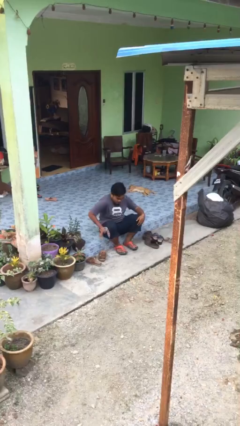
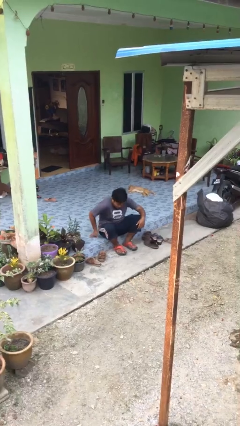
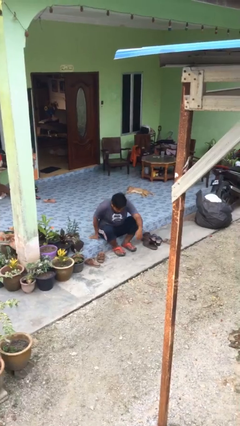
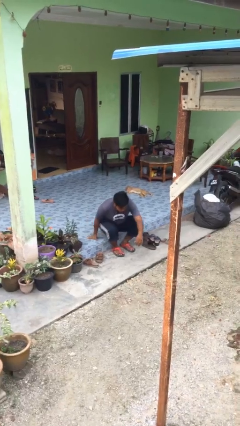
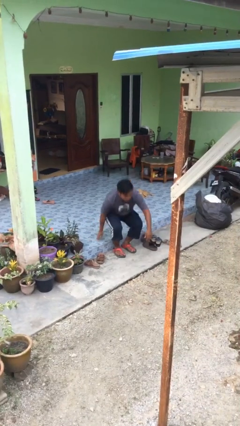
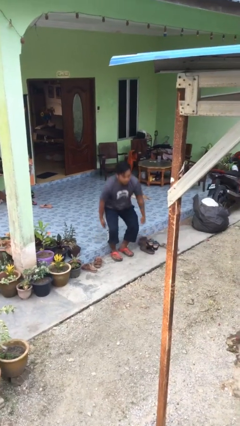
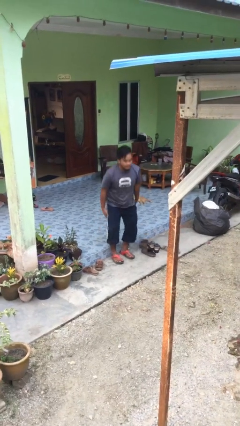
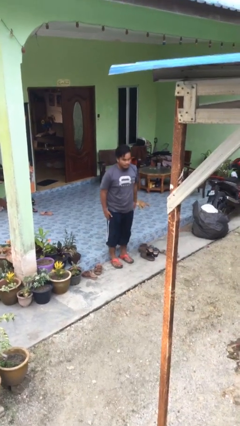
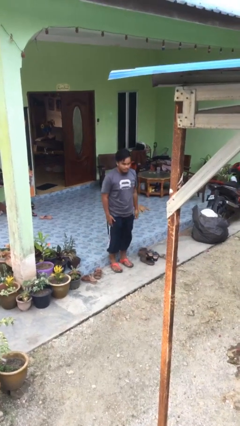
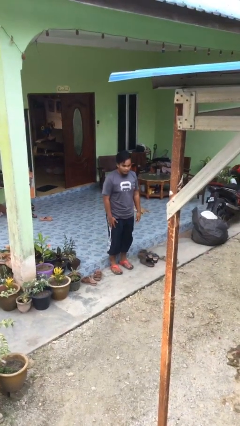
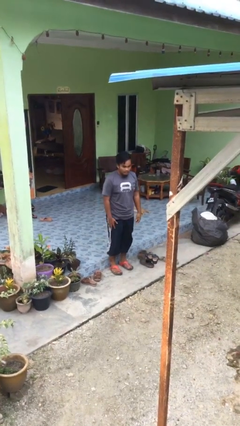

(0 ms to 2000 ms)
person stands up

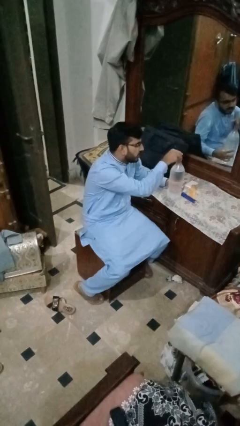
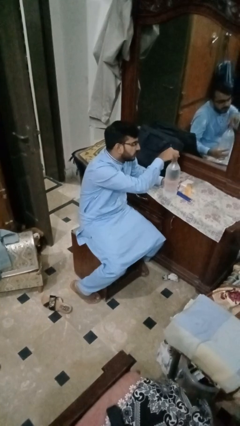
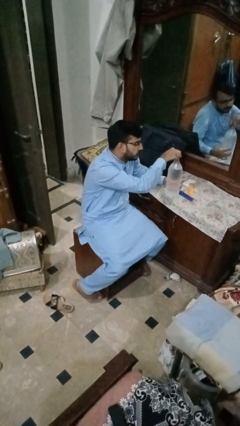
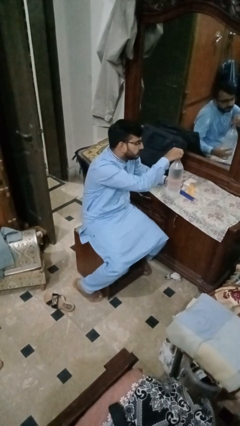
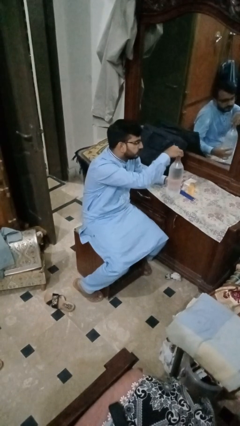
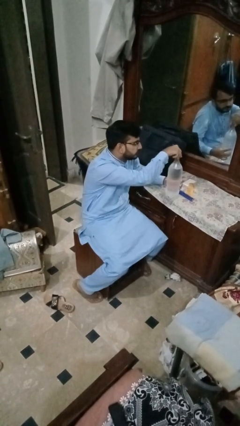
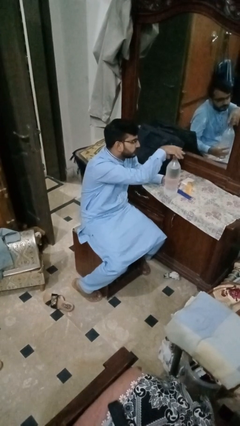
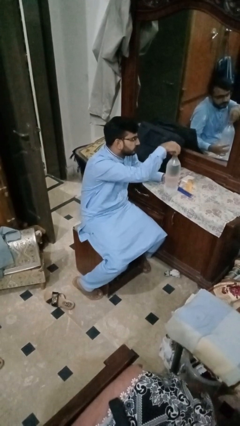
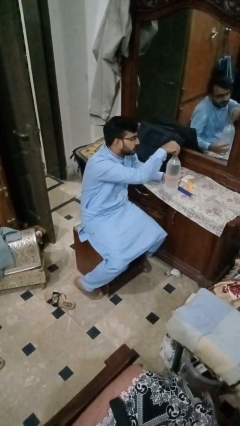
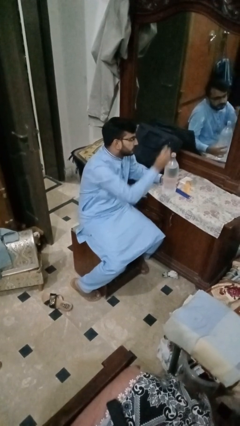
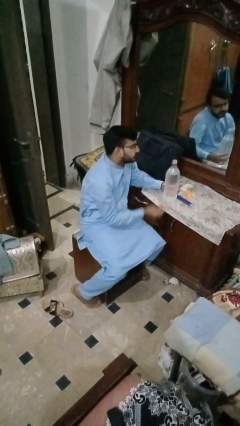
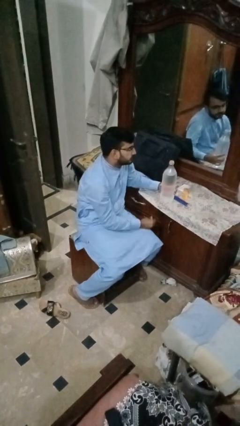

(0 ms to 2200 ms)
person unscrews lid from bottle

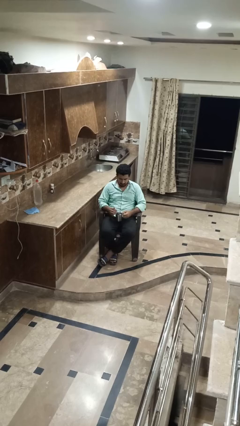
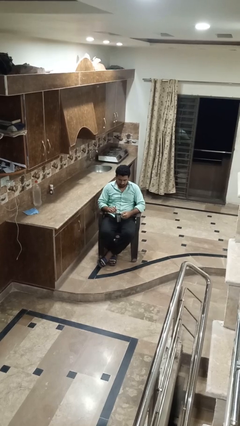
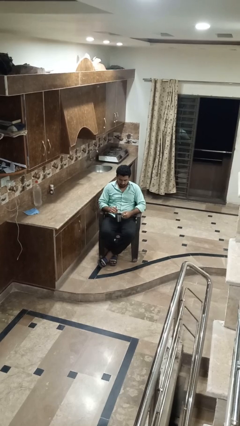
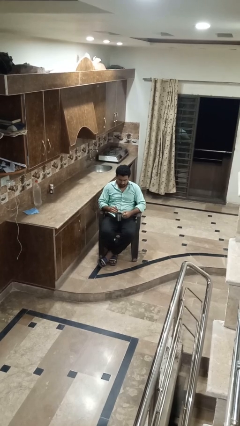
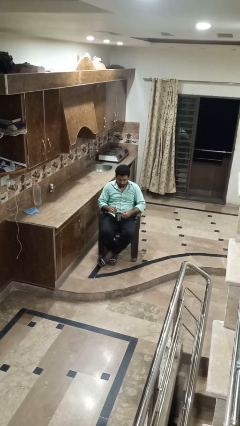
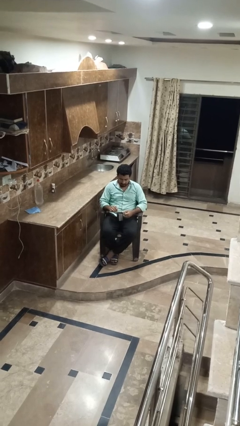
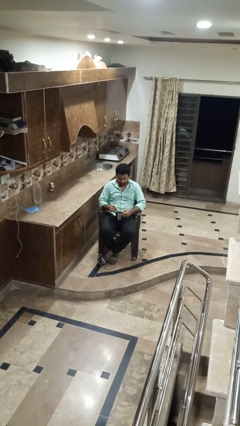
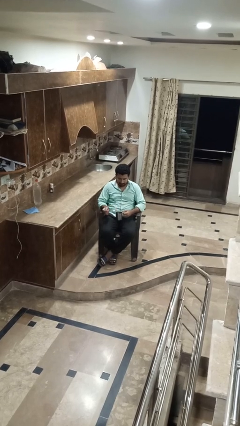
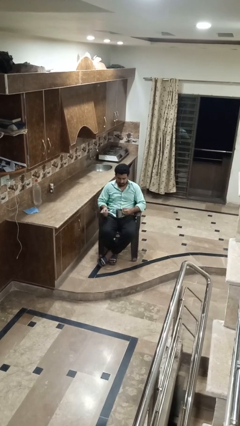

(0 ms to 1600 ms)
person stirs mug

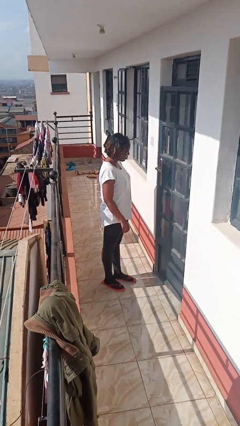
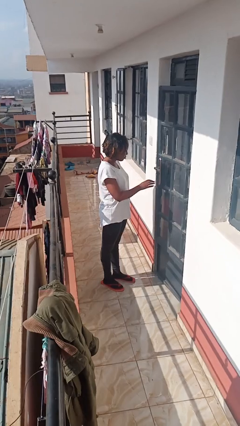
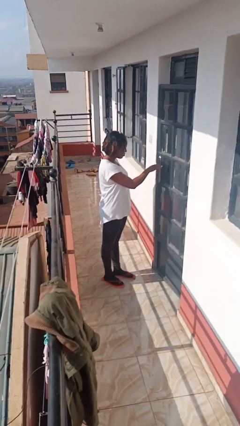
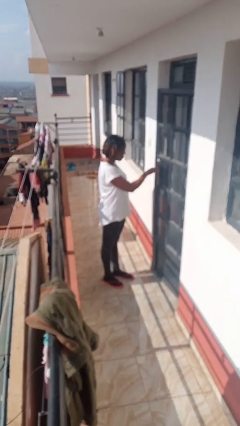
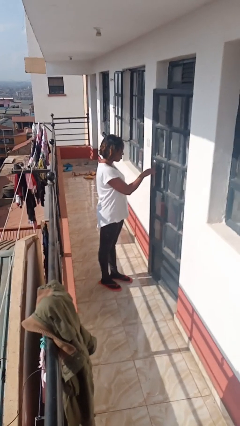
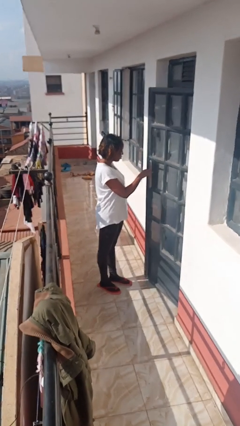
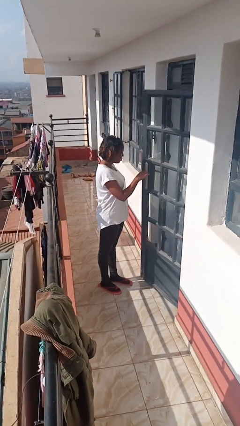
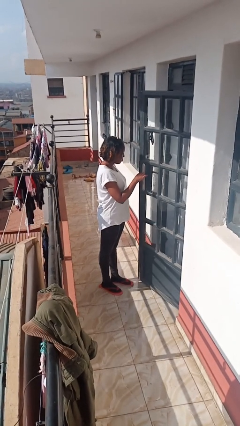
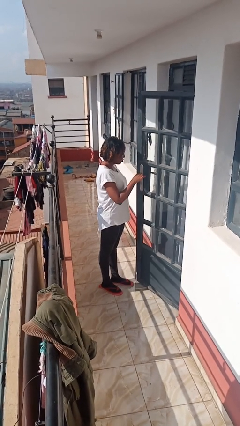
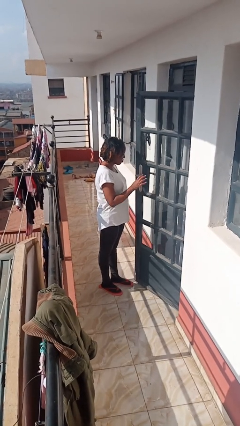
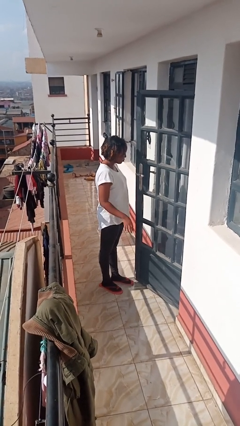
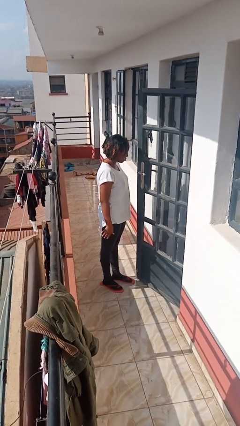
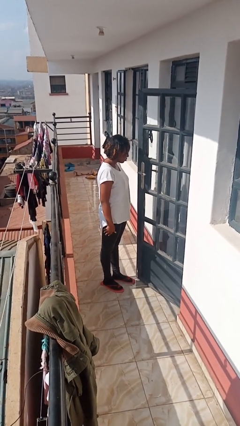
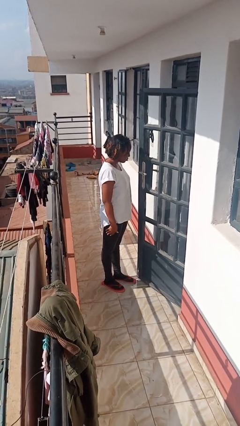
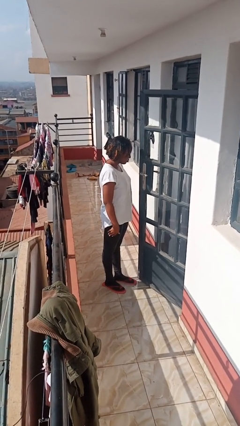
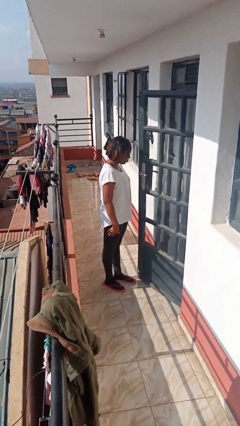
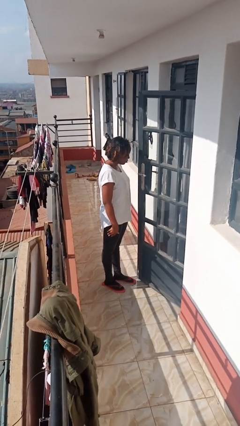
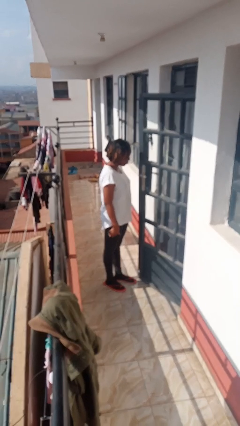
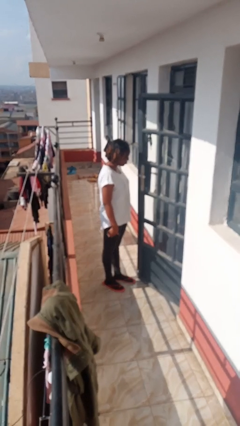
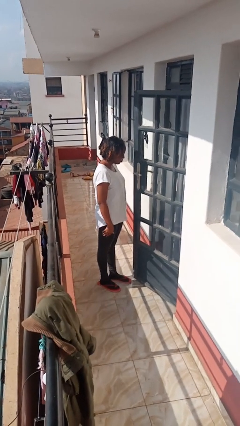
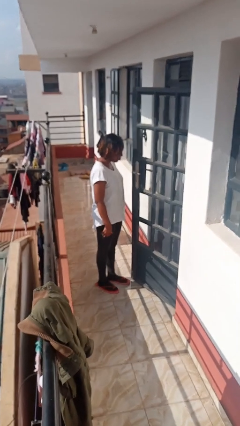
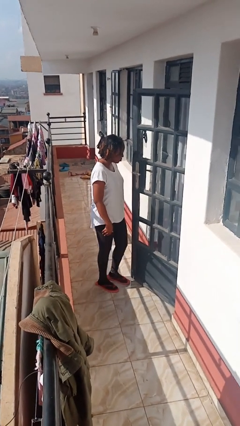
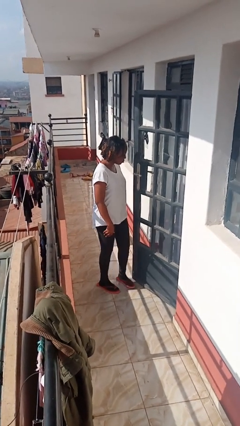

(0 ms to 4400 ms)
person opens facility door

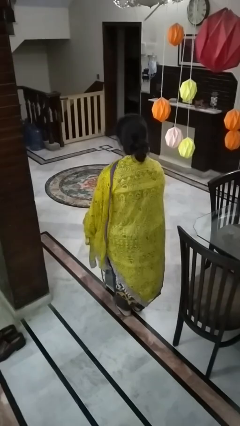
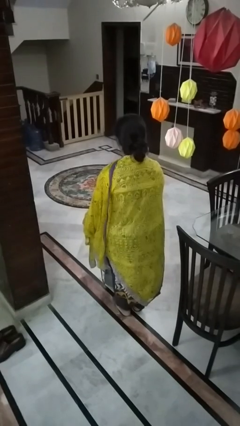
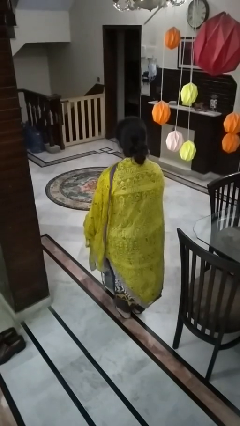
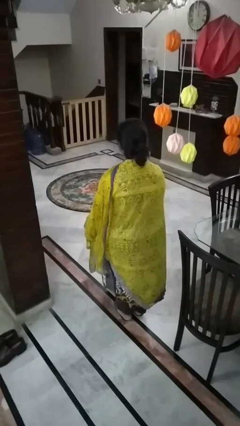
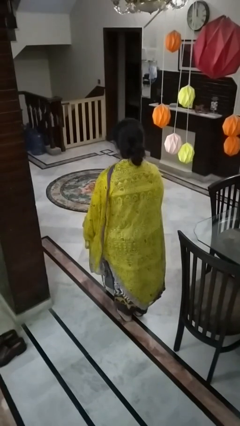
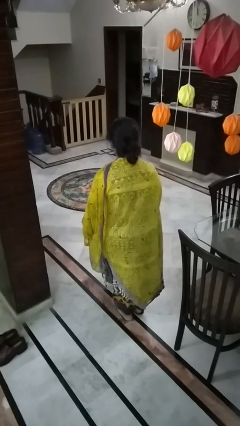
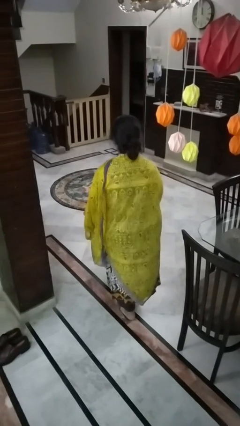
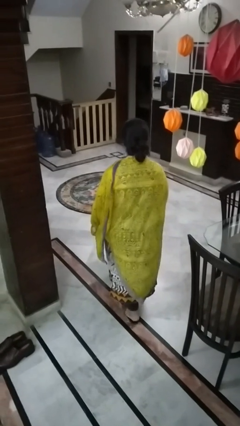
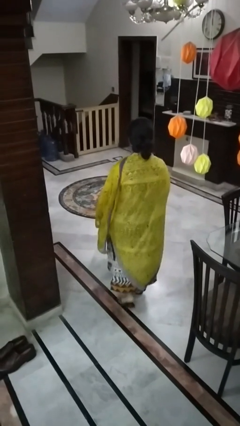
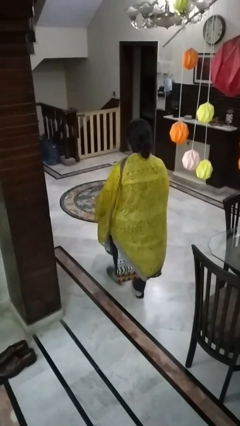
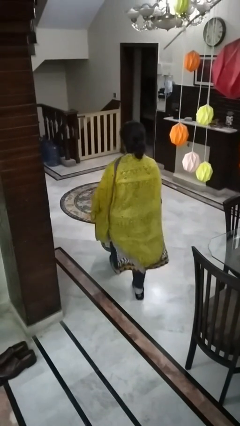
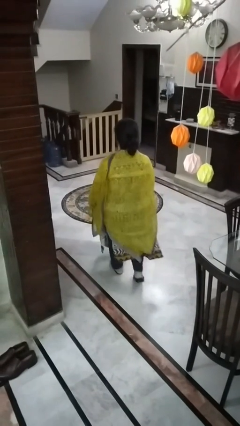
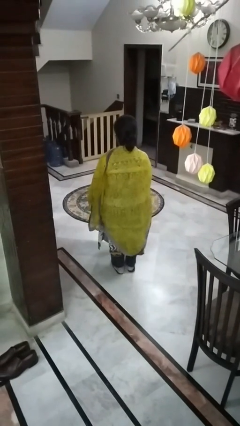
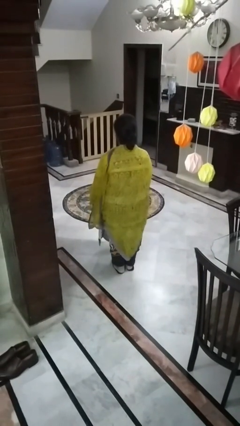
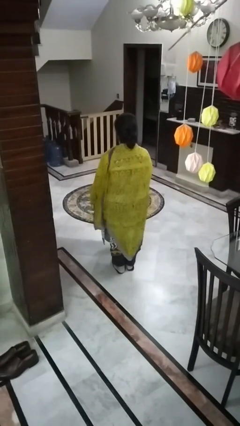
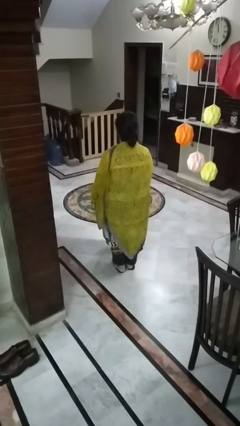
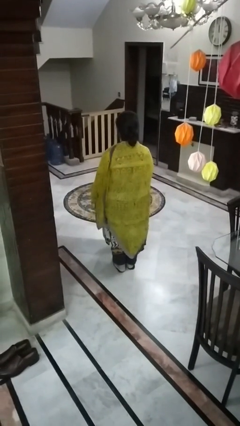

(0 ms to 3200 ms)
person carries laundry basket

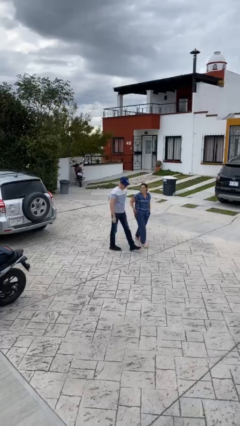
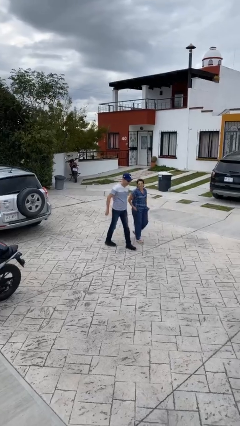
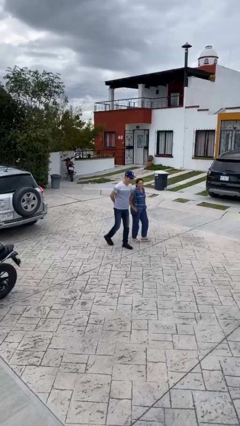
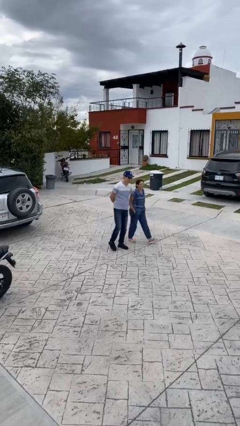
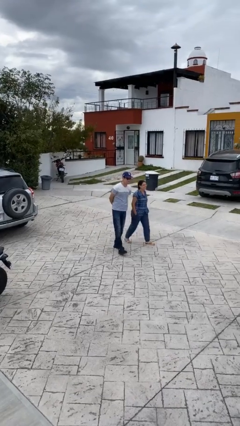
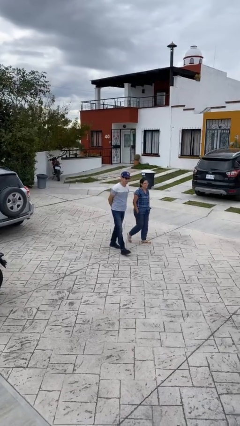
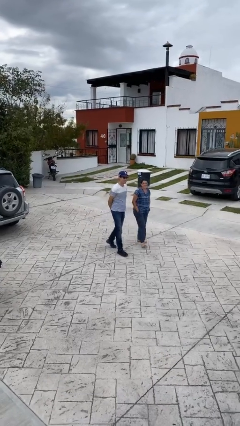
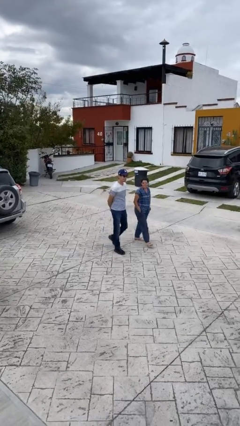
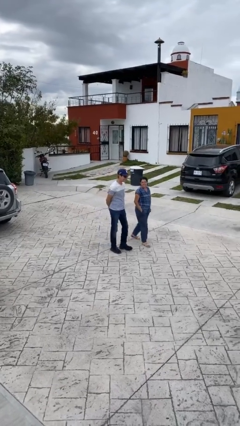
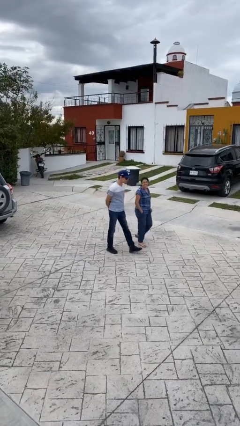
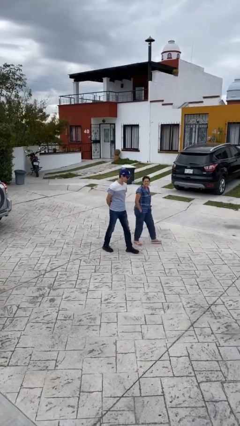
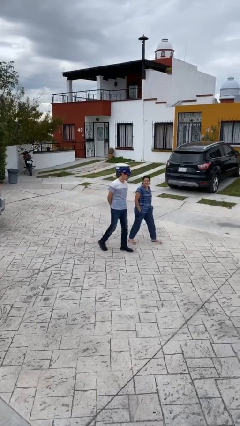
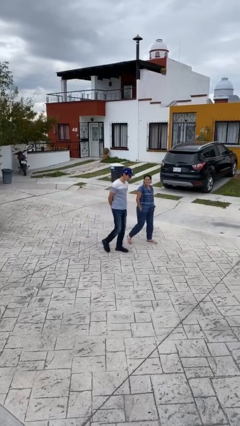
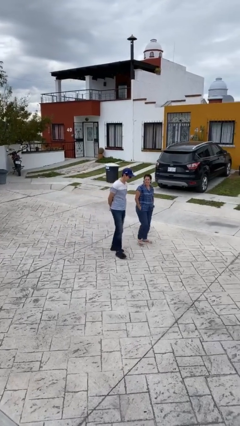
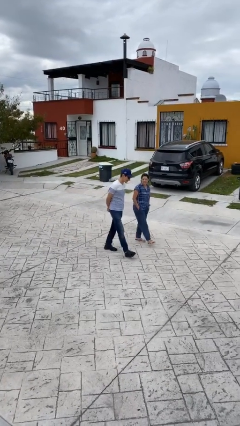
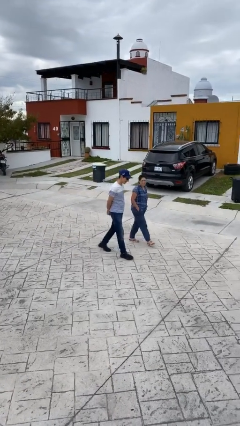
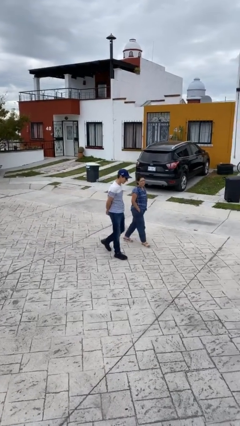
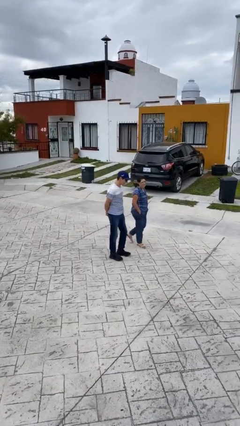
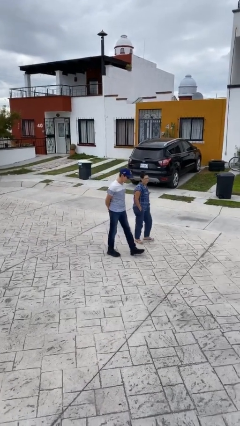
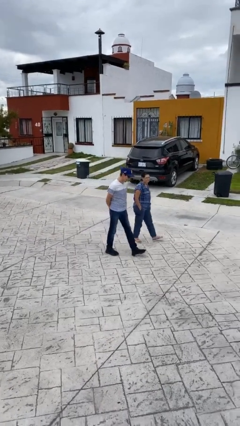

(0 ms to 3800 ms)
person talks to person
